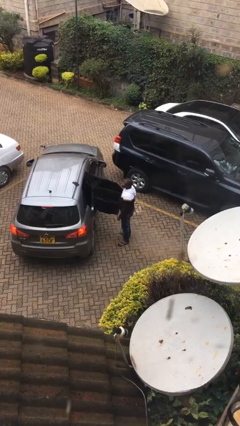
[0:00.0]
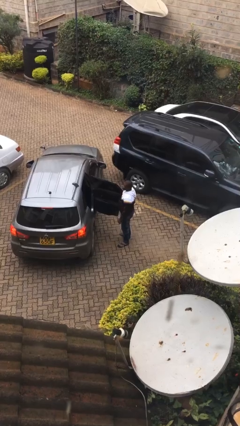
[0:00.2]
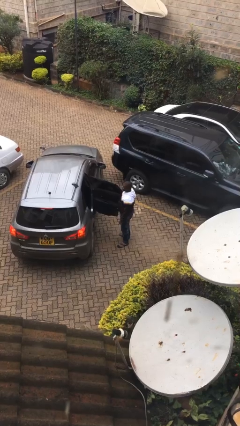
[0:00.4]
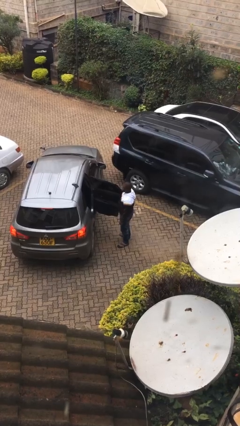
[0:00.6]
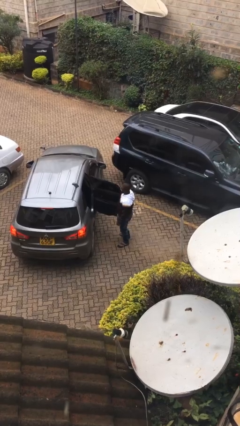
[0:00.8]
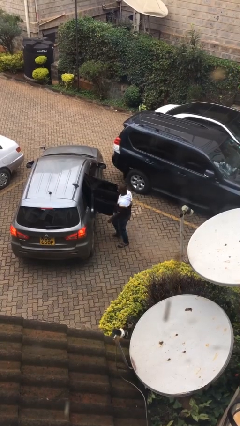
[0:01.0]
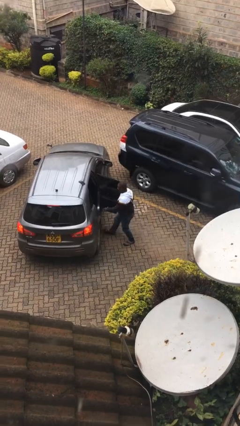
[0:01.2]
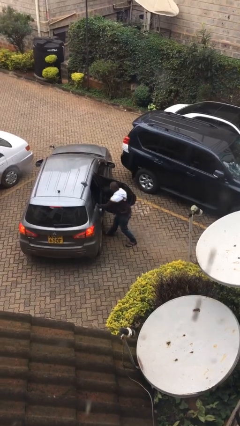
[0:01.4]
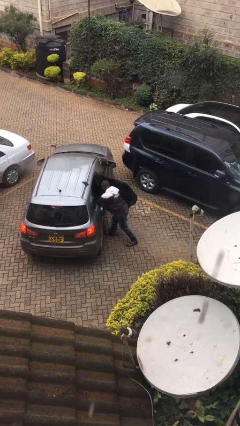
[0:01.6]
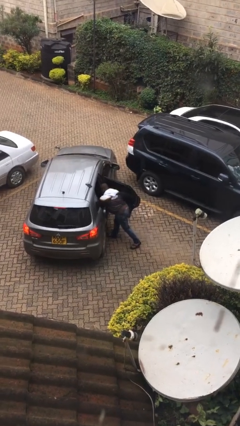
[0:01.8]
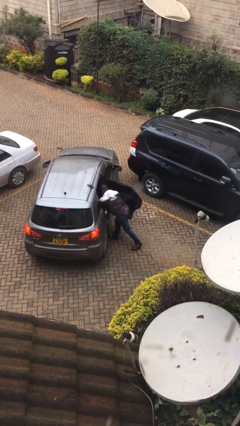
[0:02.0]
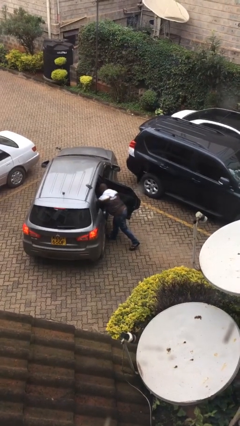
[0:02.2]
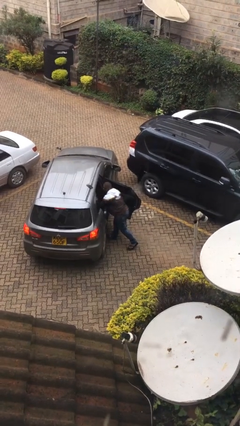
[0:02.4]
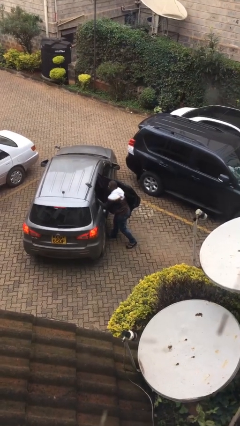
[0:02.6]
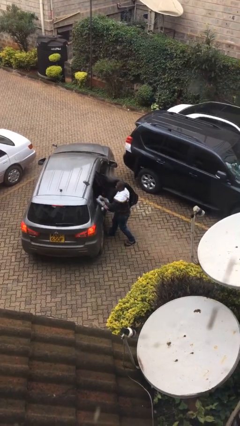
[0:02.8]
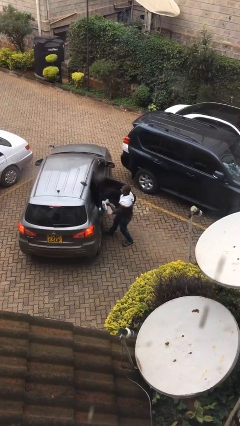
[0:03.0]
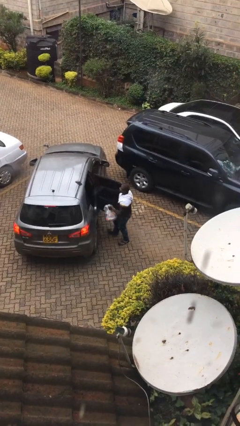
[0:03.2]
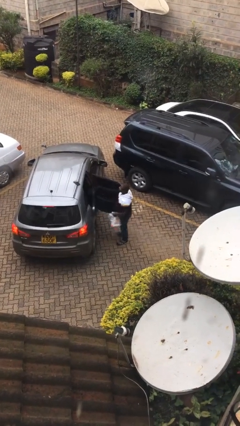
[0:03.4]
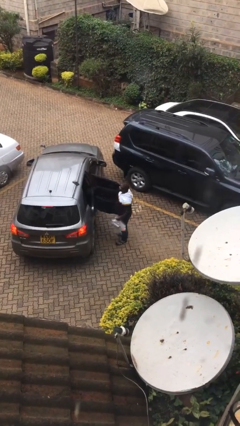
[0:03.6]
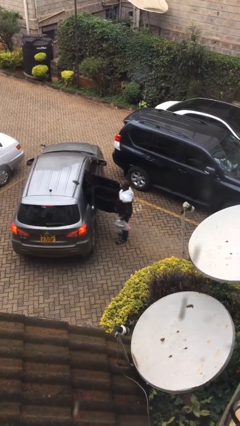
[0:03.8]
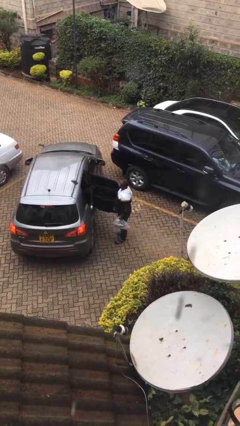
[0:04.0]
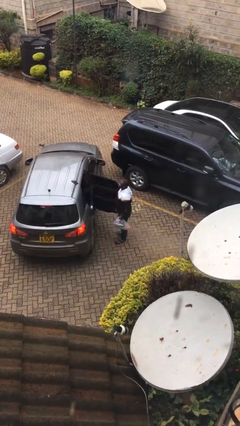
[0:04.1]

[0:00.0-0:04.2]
person unloads car

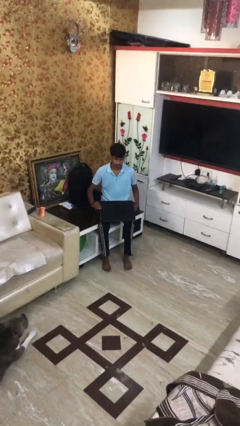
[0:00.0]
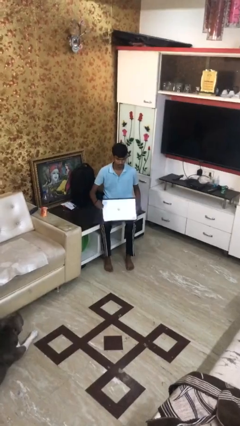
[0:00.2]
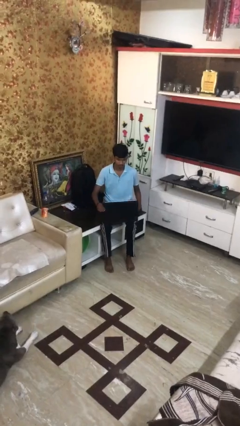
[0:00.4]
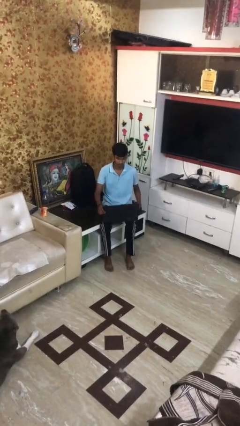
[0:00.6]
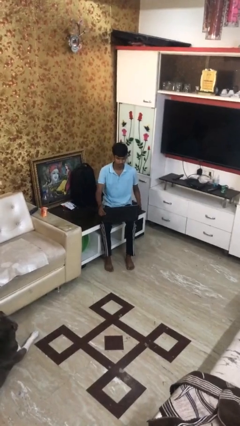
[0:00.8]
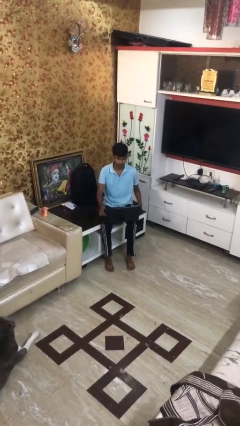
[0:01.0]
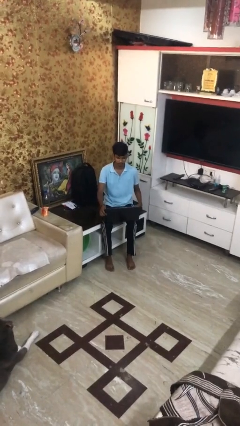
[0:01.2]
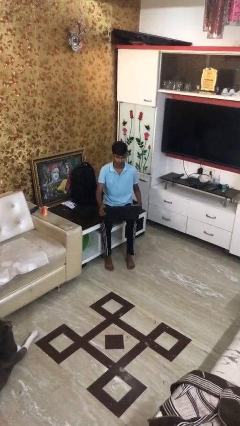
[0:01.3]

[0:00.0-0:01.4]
person opens laptop

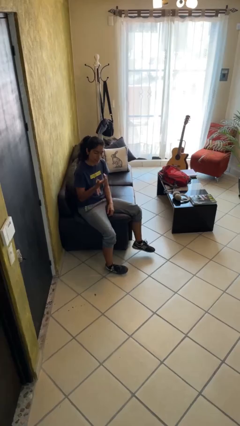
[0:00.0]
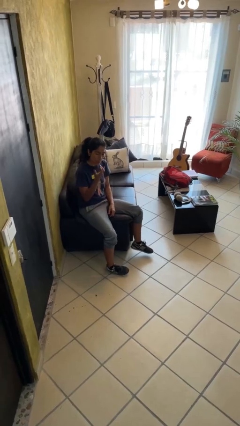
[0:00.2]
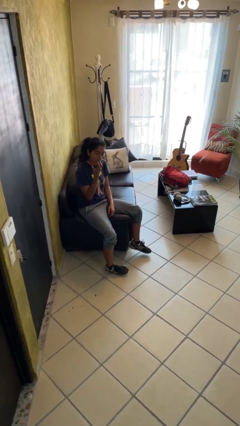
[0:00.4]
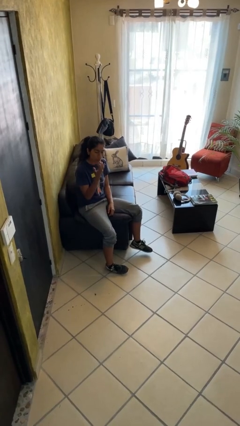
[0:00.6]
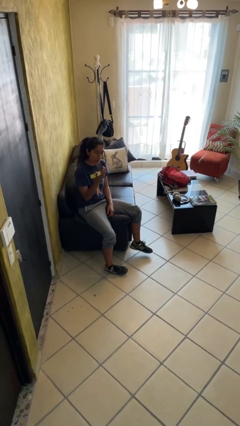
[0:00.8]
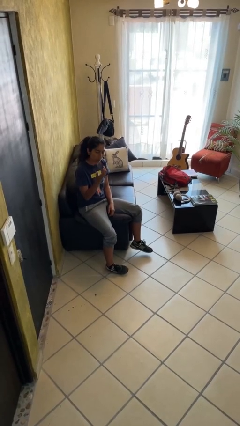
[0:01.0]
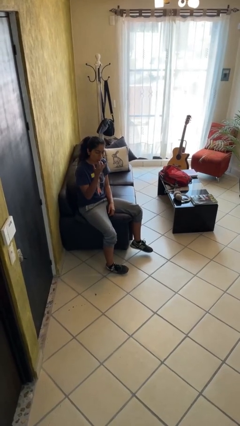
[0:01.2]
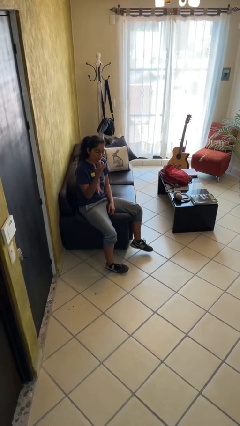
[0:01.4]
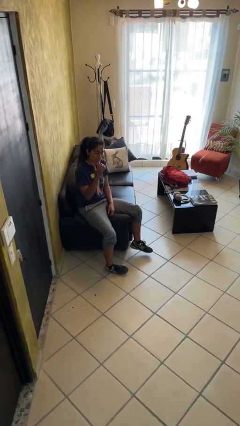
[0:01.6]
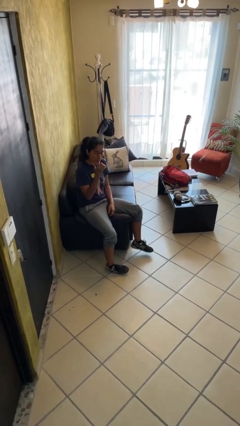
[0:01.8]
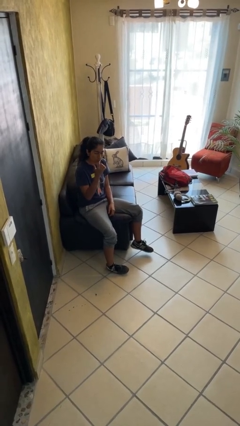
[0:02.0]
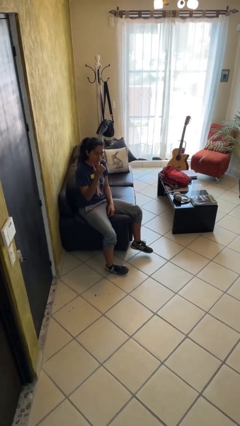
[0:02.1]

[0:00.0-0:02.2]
person licks fingers

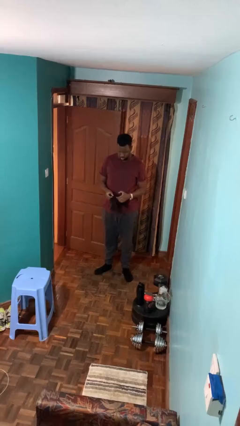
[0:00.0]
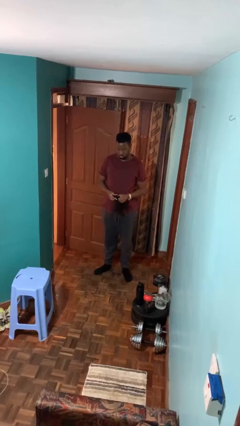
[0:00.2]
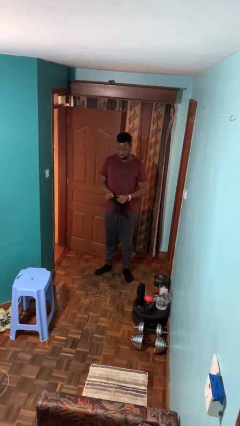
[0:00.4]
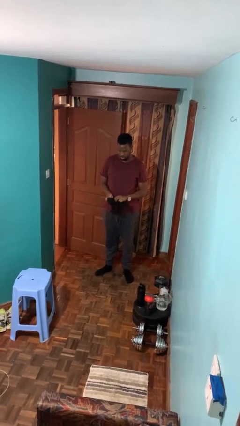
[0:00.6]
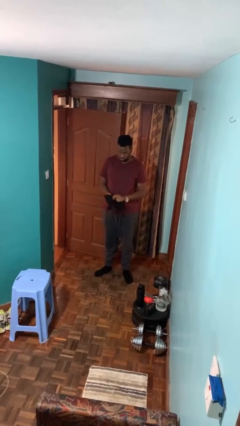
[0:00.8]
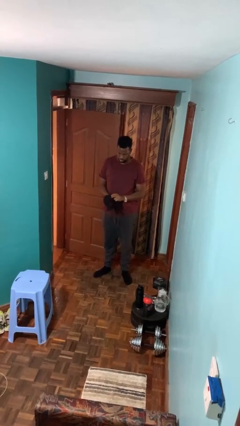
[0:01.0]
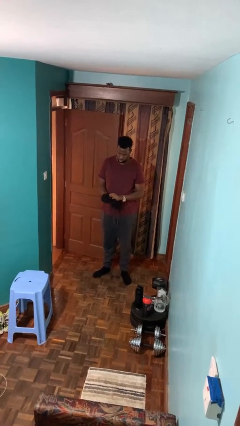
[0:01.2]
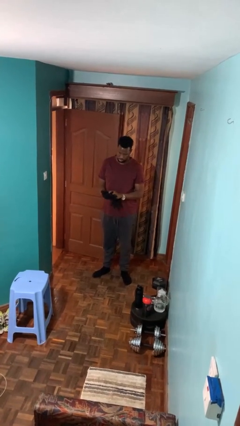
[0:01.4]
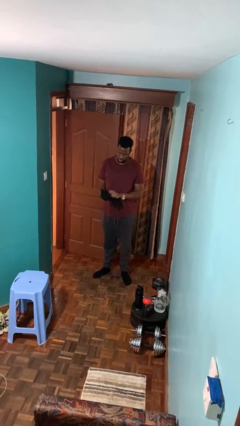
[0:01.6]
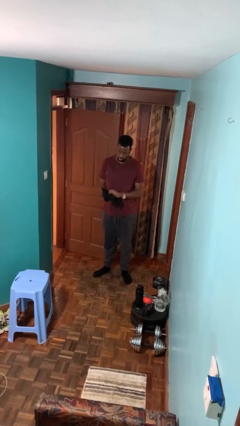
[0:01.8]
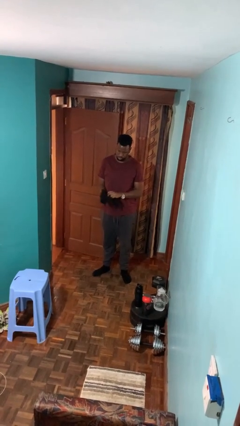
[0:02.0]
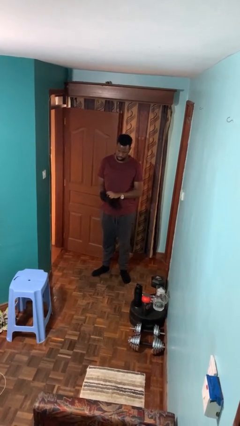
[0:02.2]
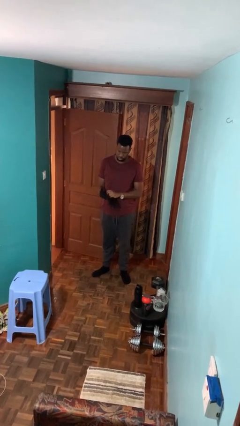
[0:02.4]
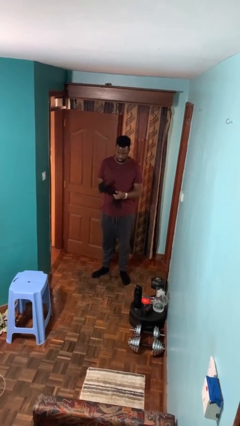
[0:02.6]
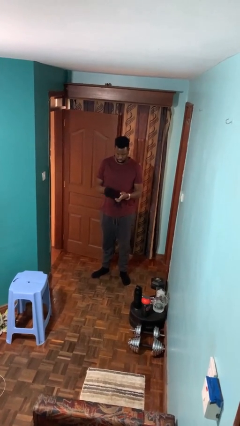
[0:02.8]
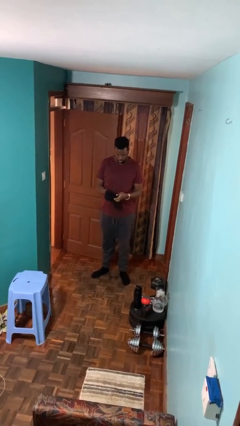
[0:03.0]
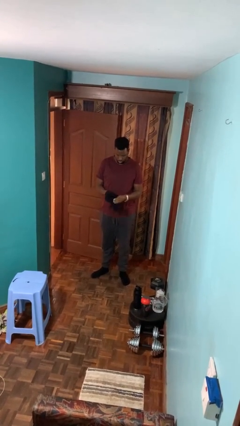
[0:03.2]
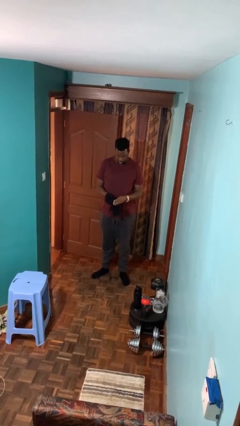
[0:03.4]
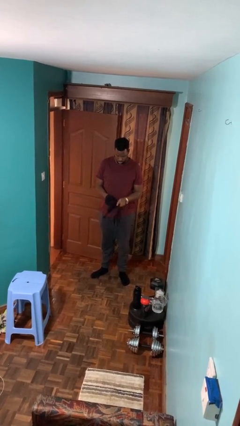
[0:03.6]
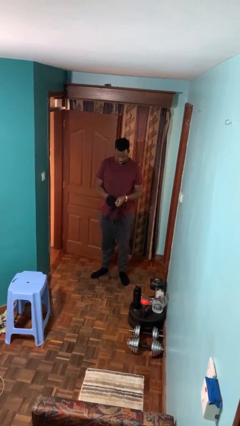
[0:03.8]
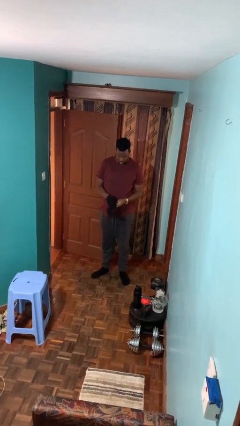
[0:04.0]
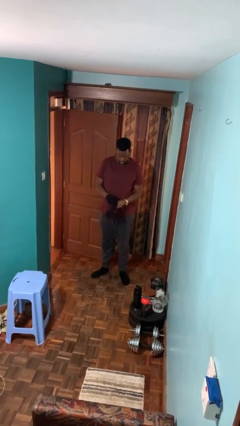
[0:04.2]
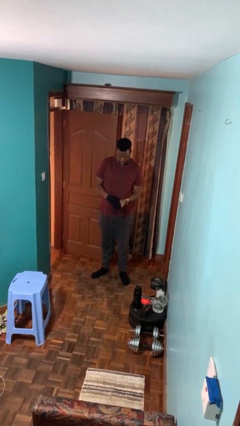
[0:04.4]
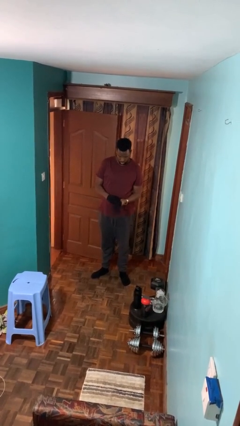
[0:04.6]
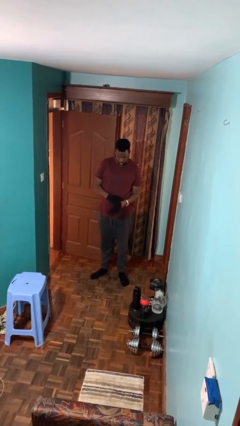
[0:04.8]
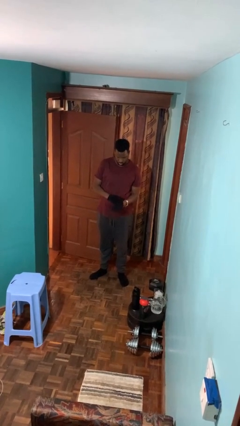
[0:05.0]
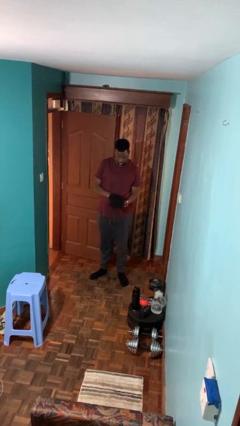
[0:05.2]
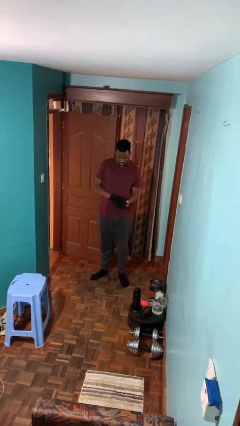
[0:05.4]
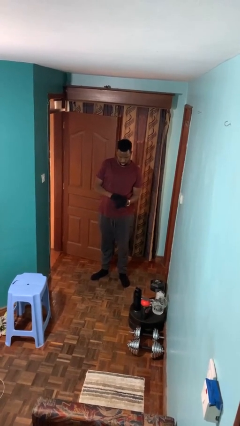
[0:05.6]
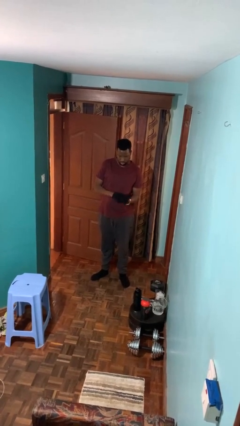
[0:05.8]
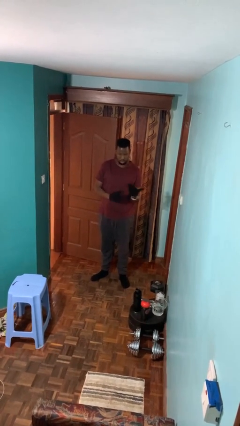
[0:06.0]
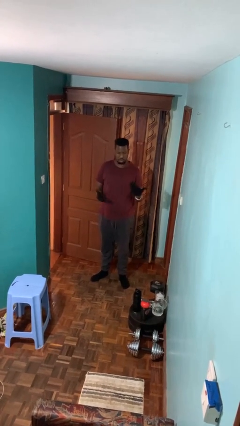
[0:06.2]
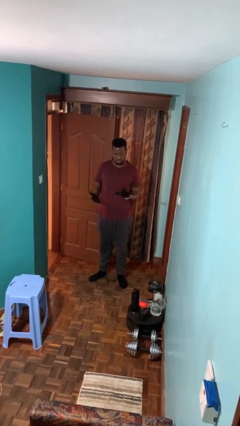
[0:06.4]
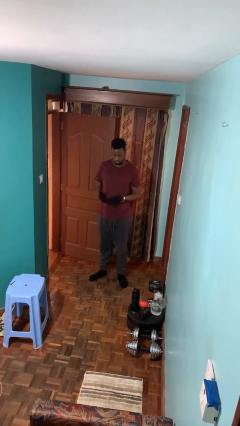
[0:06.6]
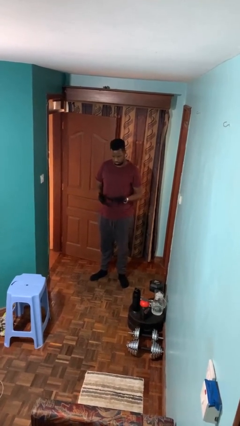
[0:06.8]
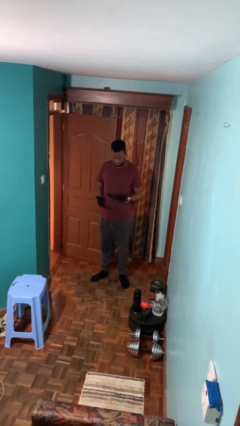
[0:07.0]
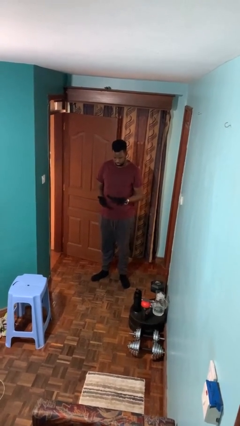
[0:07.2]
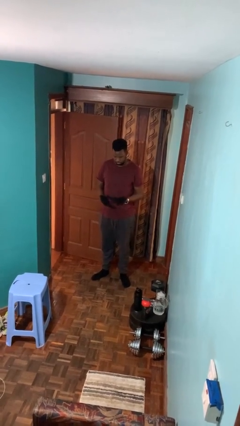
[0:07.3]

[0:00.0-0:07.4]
person puts on gloves

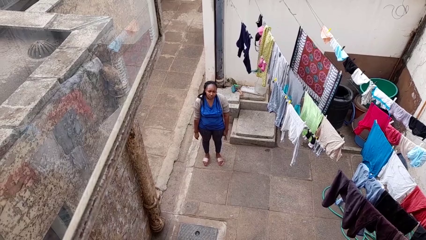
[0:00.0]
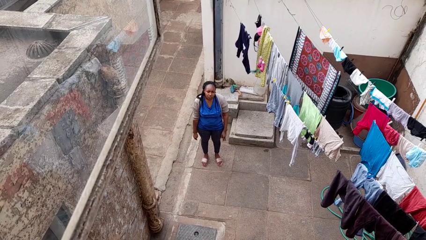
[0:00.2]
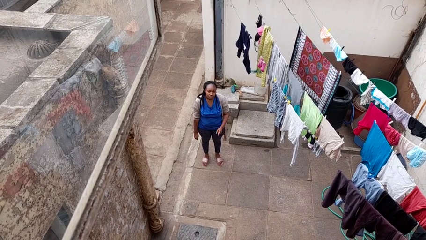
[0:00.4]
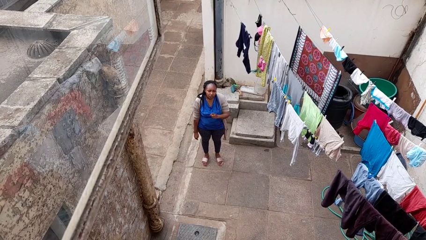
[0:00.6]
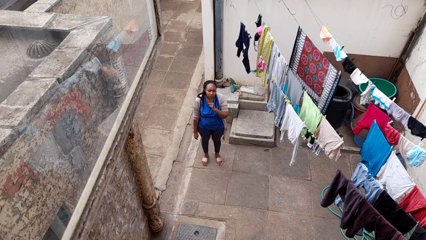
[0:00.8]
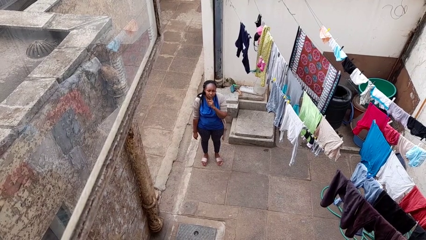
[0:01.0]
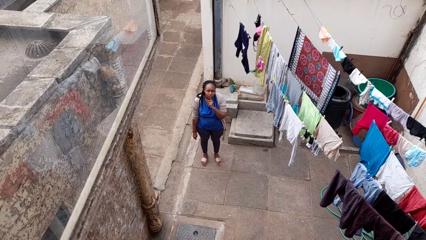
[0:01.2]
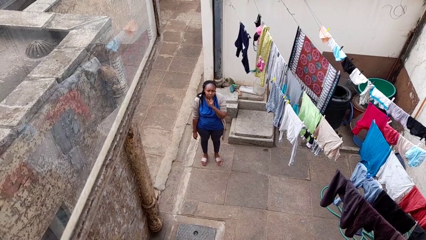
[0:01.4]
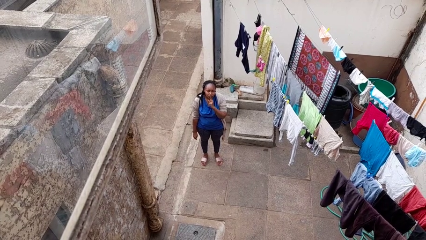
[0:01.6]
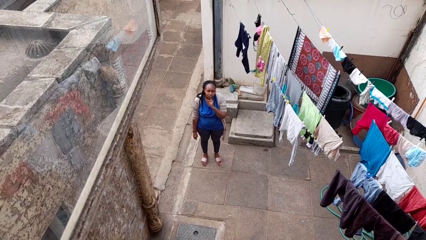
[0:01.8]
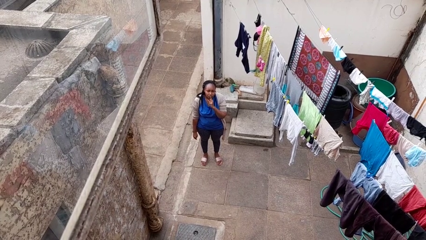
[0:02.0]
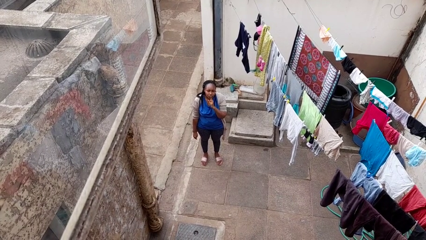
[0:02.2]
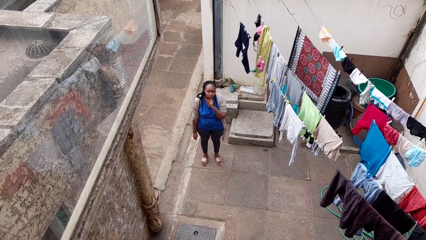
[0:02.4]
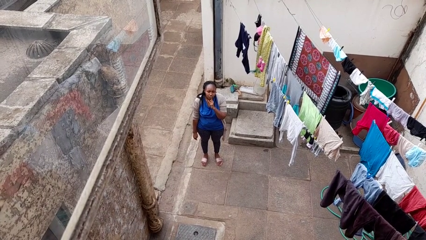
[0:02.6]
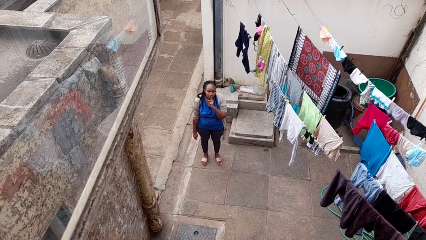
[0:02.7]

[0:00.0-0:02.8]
person gestures be quiet
